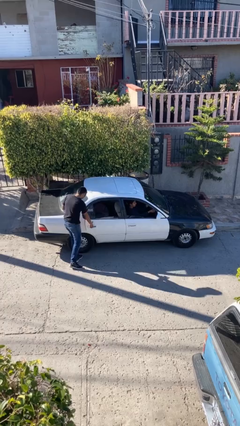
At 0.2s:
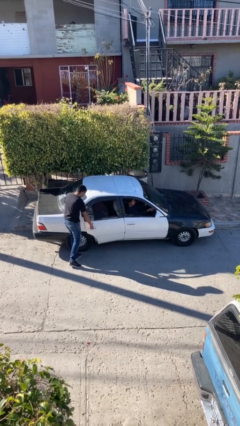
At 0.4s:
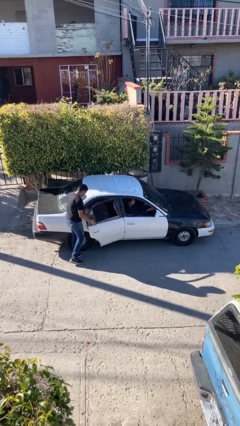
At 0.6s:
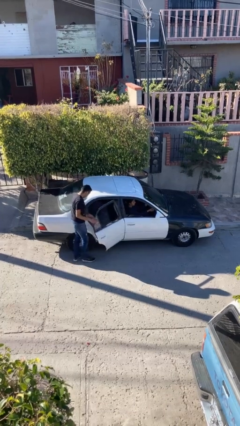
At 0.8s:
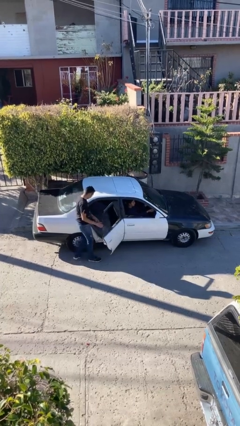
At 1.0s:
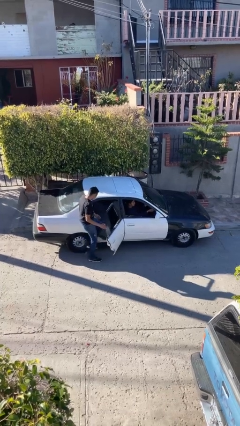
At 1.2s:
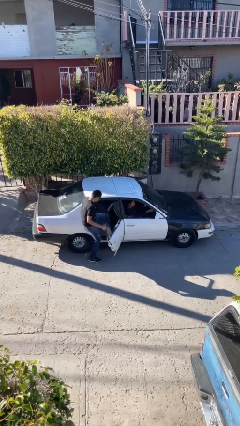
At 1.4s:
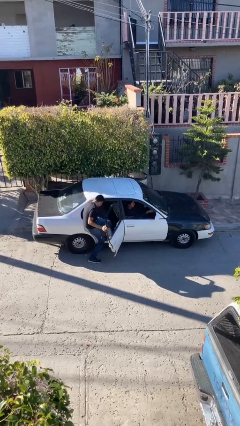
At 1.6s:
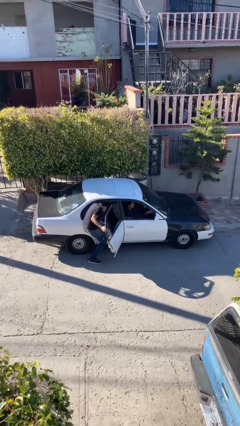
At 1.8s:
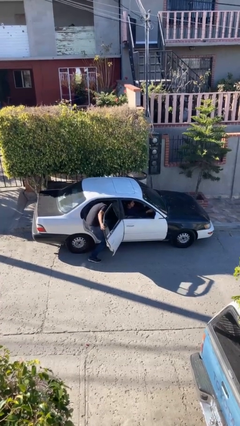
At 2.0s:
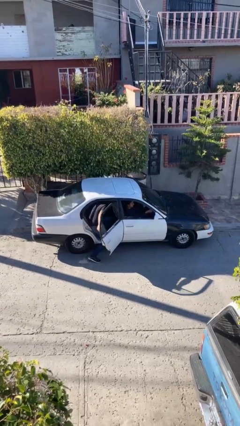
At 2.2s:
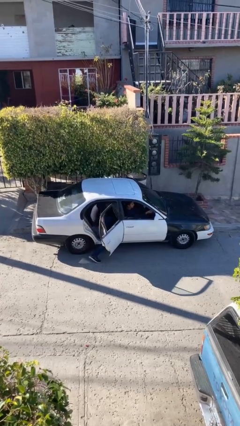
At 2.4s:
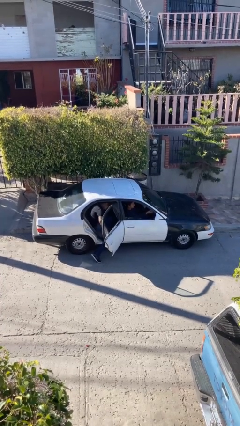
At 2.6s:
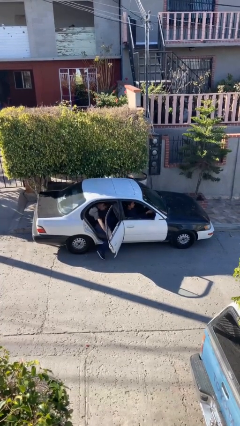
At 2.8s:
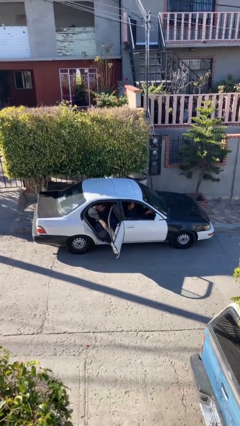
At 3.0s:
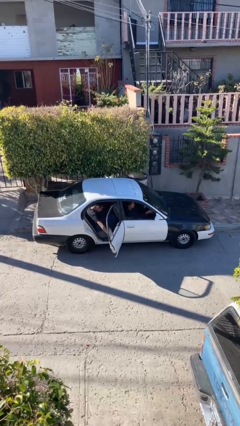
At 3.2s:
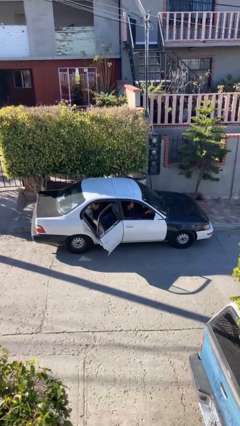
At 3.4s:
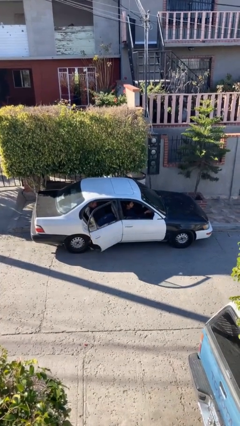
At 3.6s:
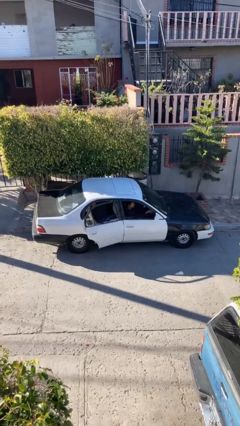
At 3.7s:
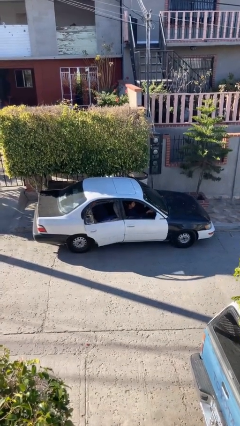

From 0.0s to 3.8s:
car picks up person

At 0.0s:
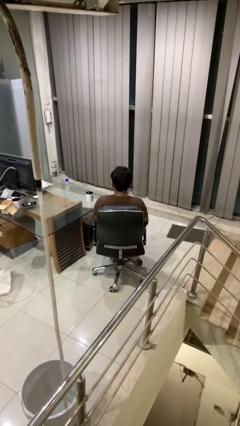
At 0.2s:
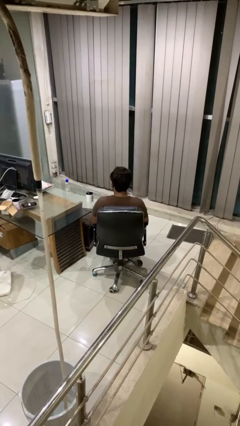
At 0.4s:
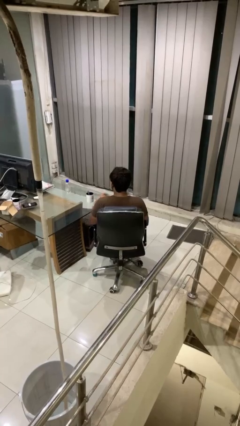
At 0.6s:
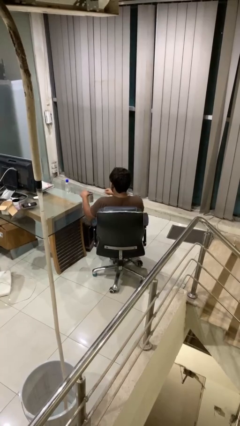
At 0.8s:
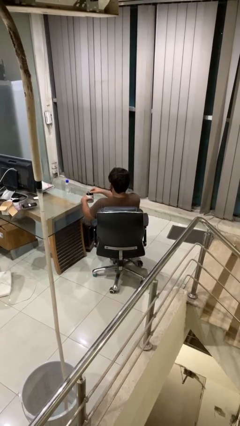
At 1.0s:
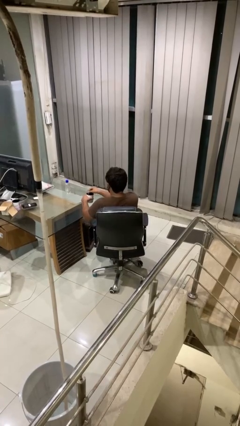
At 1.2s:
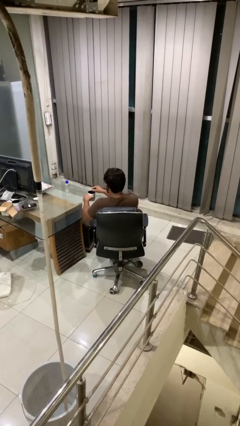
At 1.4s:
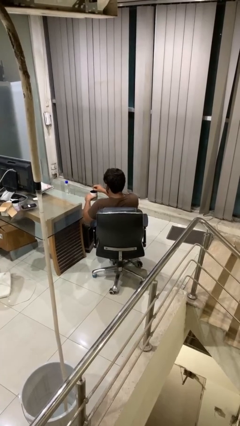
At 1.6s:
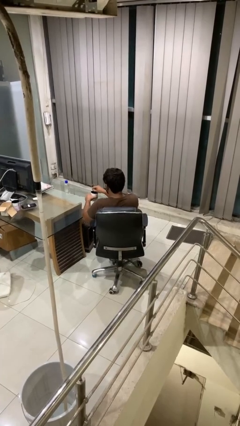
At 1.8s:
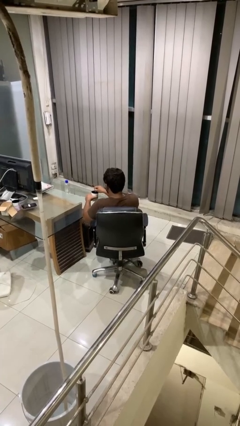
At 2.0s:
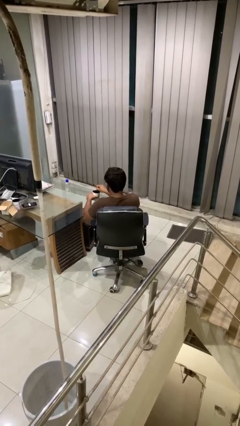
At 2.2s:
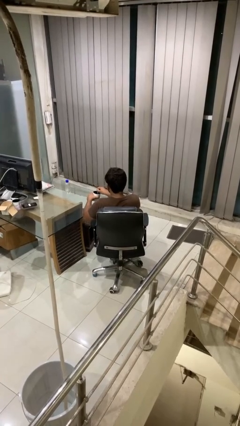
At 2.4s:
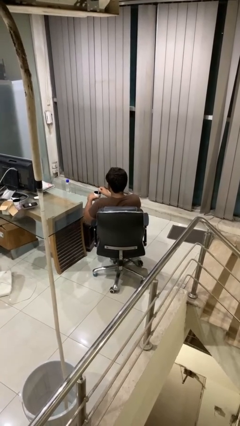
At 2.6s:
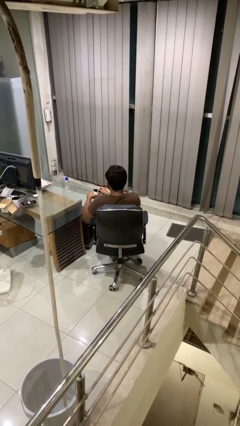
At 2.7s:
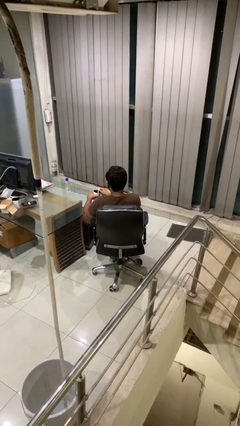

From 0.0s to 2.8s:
person stirs mug

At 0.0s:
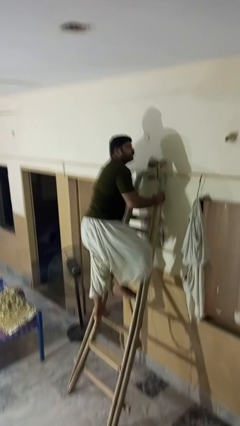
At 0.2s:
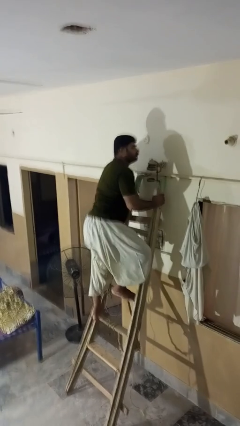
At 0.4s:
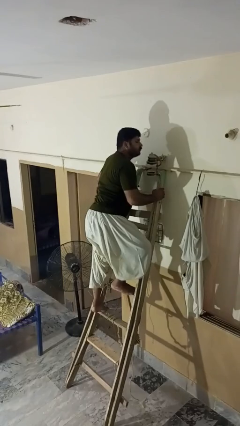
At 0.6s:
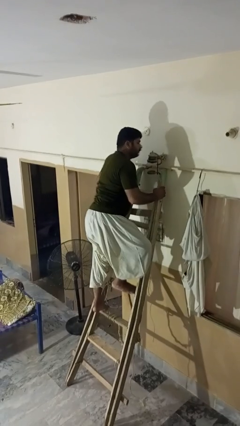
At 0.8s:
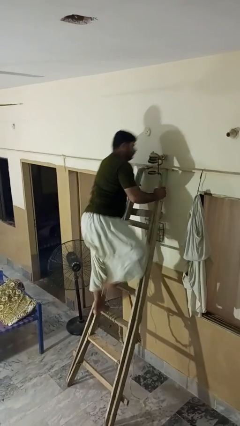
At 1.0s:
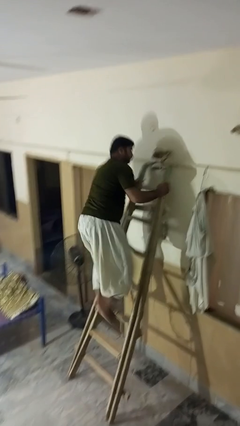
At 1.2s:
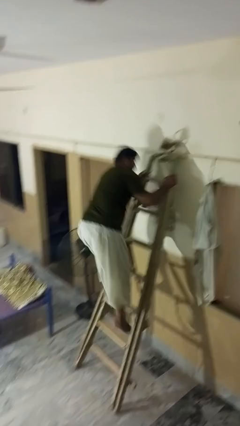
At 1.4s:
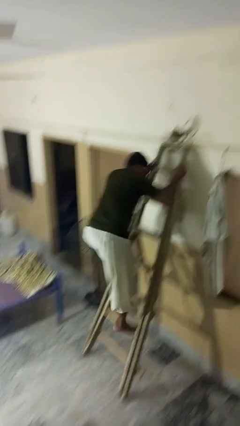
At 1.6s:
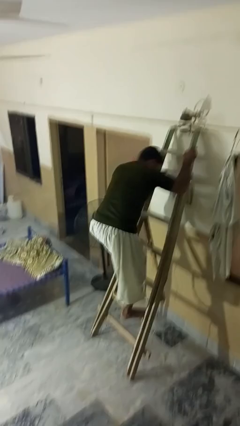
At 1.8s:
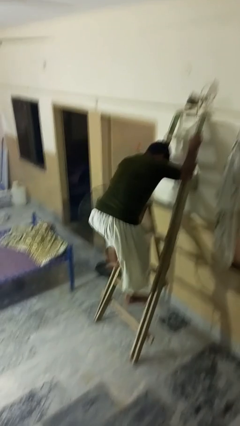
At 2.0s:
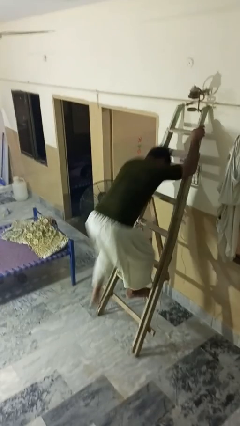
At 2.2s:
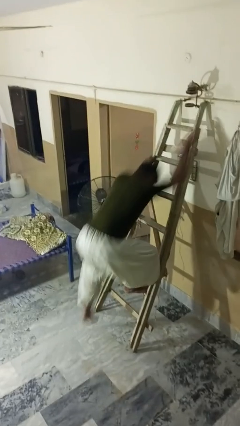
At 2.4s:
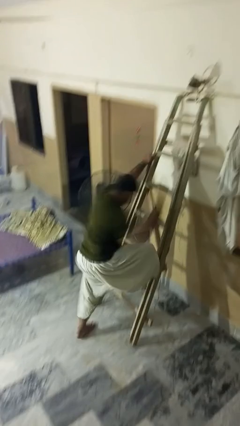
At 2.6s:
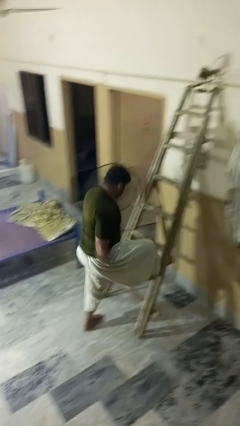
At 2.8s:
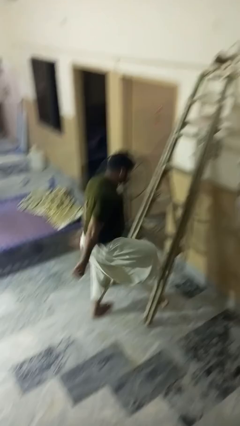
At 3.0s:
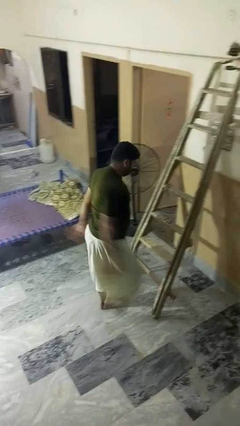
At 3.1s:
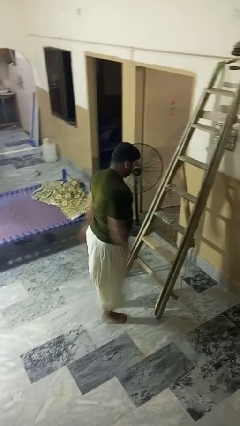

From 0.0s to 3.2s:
person climbs down ladder

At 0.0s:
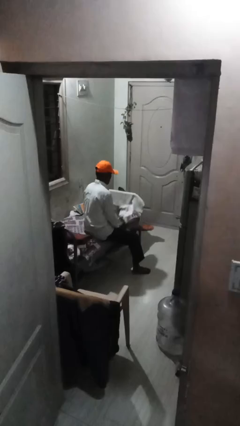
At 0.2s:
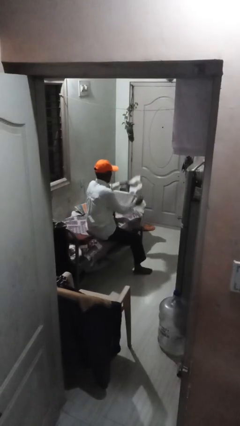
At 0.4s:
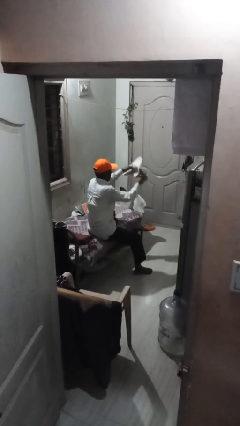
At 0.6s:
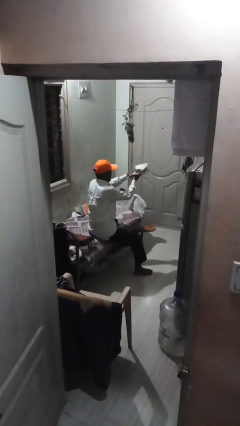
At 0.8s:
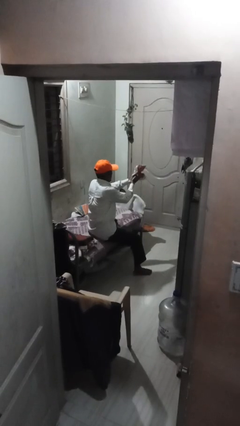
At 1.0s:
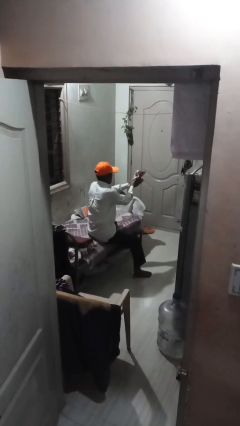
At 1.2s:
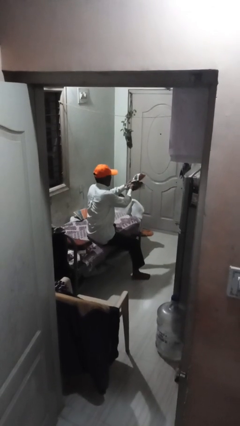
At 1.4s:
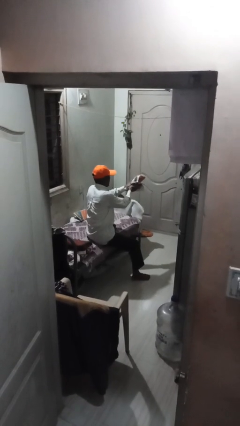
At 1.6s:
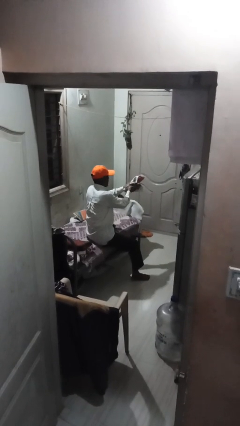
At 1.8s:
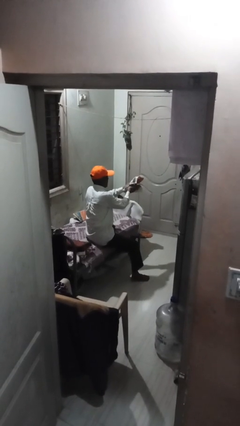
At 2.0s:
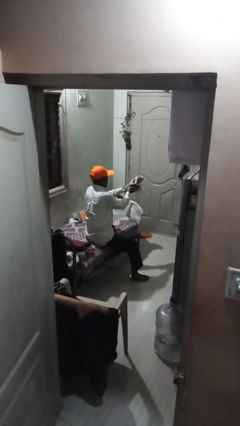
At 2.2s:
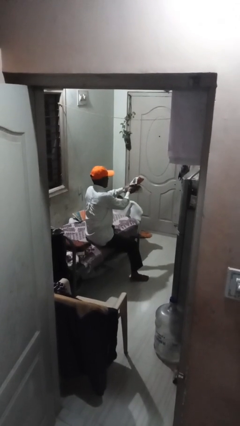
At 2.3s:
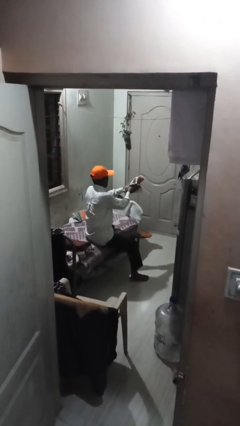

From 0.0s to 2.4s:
person crumples paper

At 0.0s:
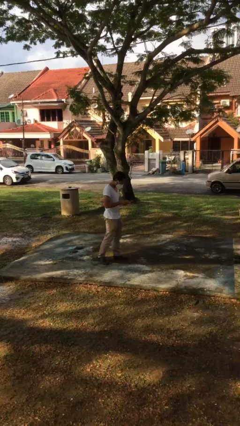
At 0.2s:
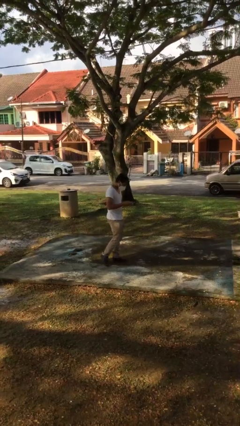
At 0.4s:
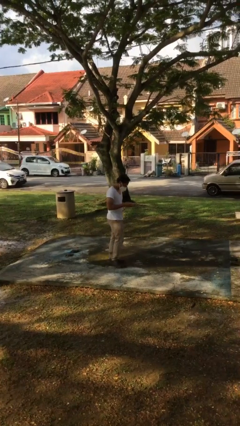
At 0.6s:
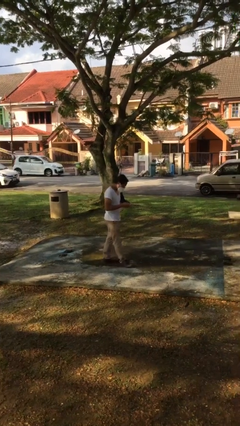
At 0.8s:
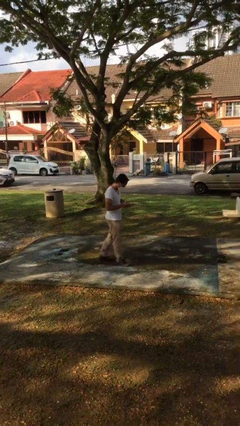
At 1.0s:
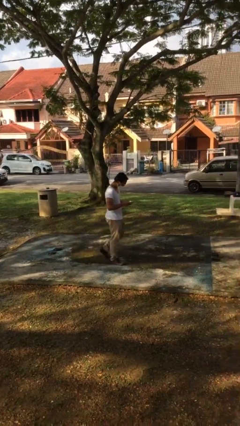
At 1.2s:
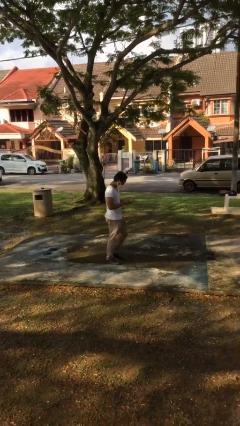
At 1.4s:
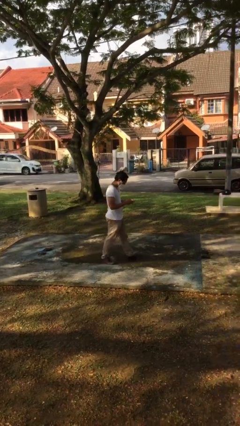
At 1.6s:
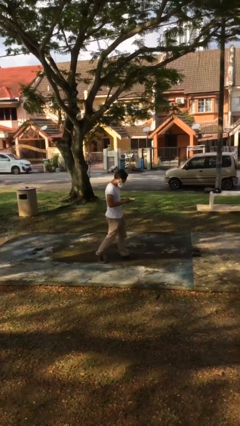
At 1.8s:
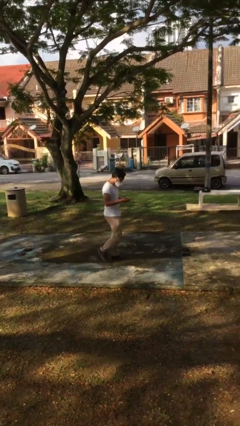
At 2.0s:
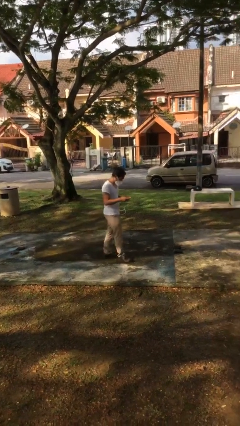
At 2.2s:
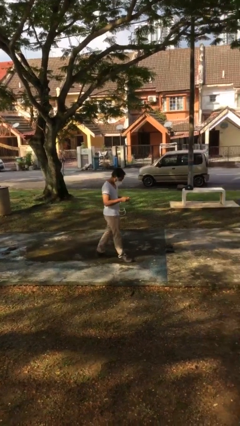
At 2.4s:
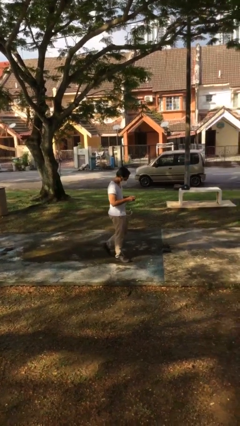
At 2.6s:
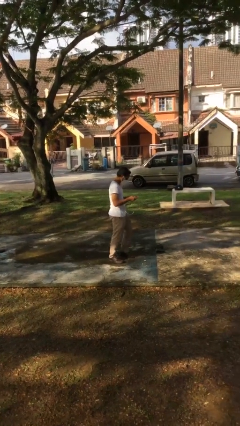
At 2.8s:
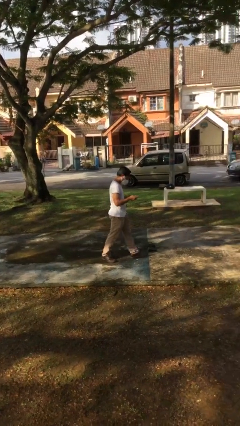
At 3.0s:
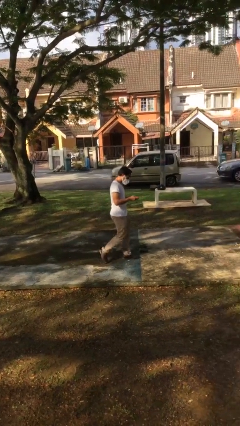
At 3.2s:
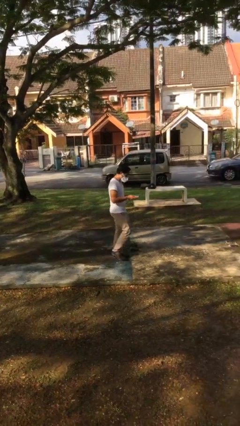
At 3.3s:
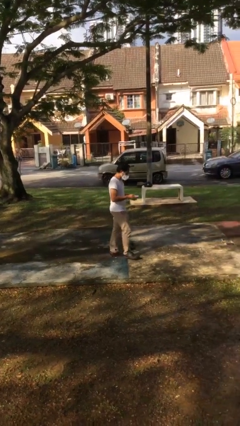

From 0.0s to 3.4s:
person texts on phone

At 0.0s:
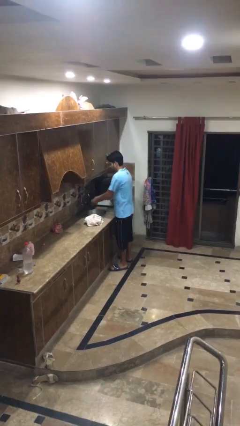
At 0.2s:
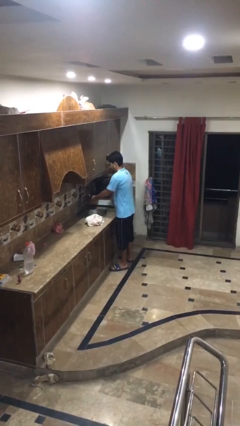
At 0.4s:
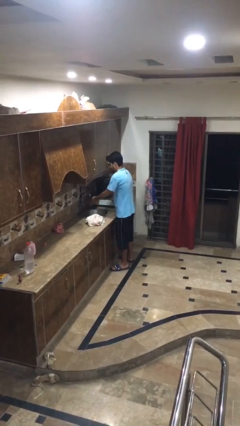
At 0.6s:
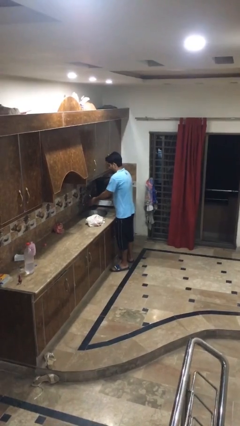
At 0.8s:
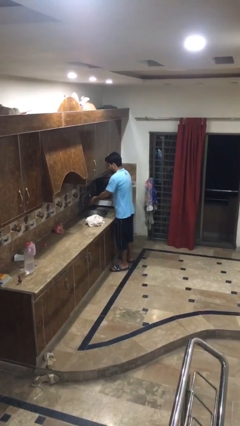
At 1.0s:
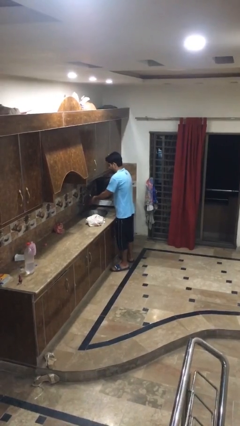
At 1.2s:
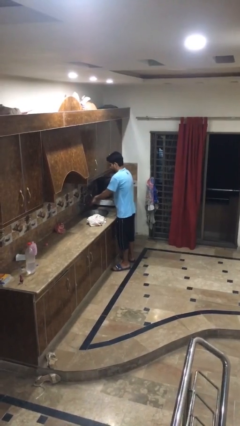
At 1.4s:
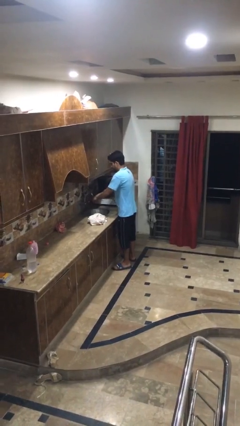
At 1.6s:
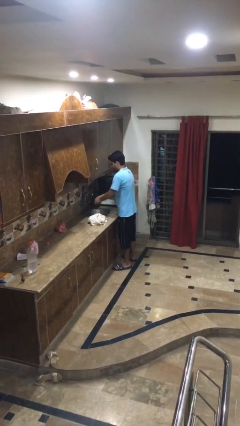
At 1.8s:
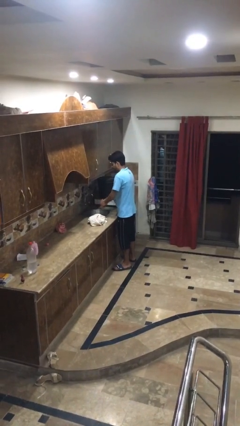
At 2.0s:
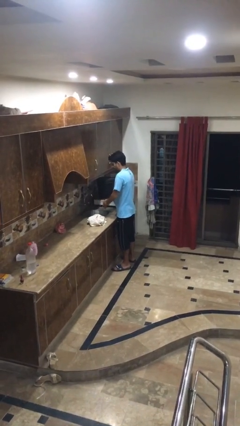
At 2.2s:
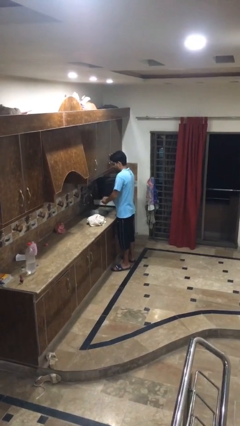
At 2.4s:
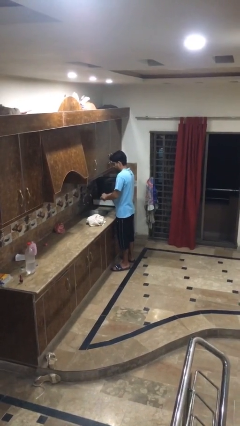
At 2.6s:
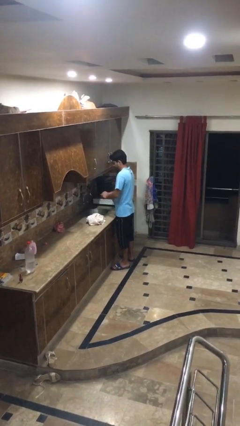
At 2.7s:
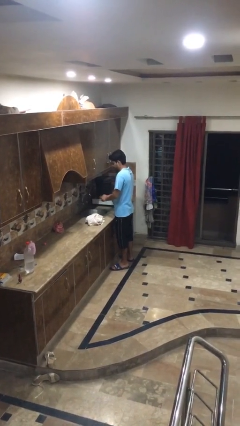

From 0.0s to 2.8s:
person washes hands
